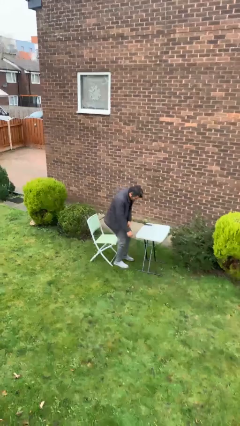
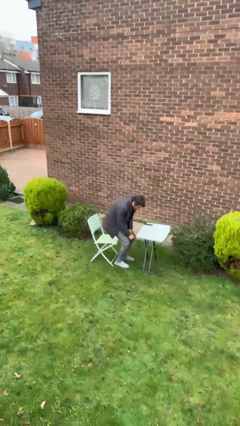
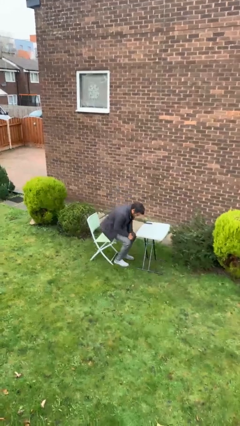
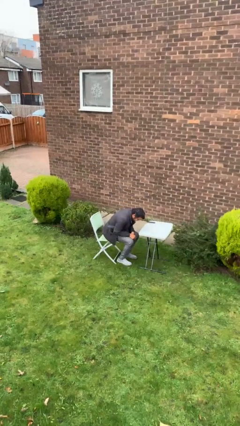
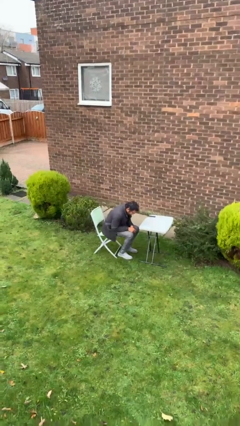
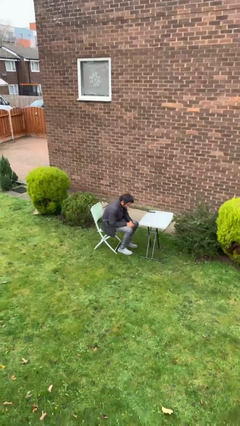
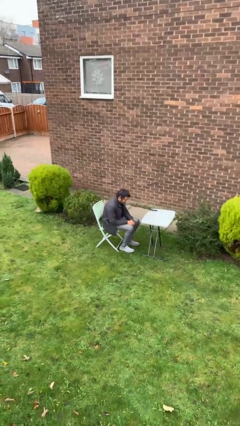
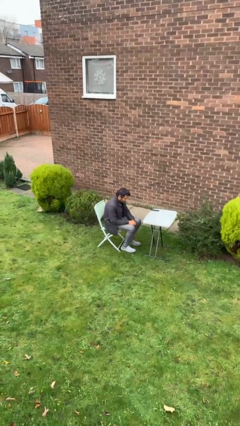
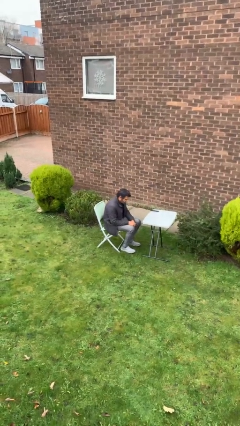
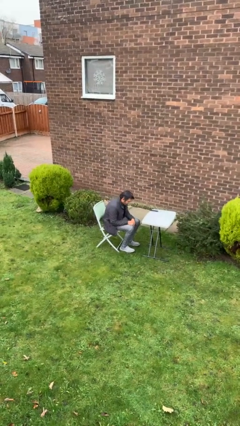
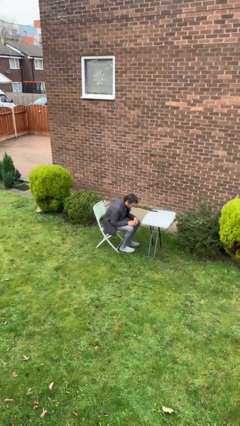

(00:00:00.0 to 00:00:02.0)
person sits down

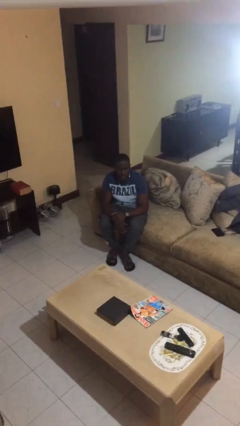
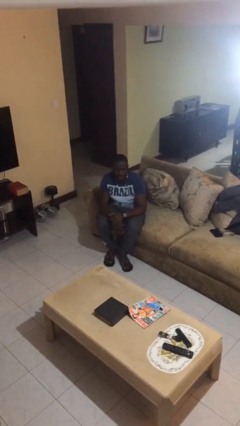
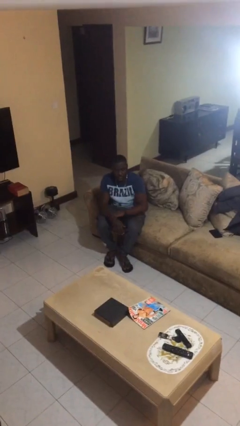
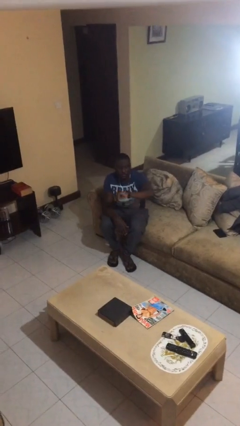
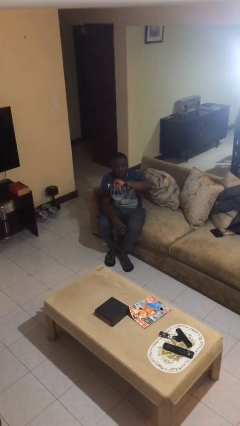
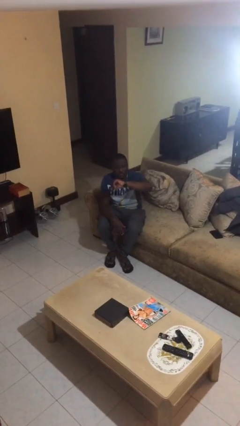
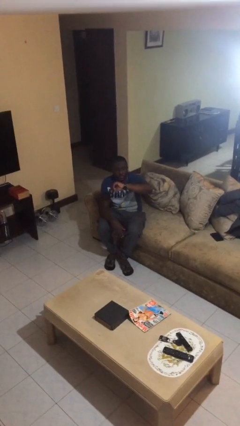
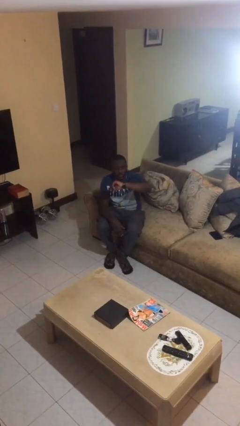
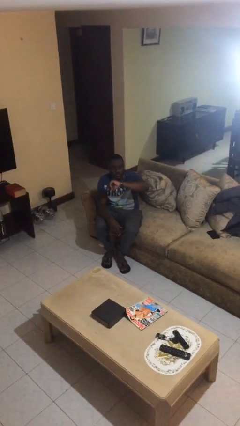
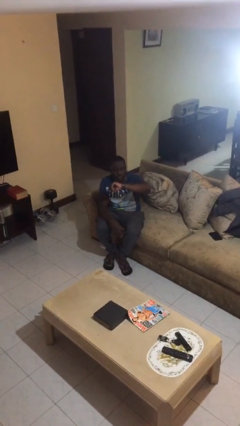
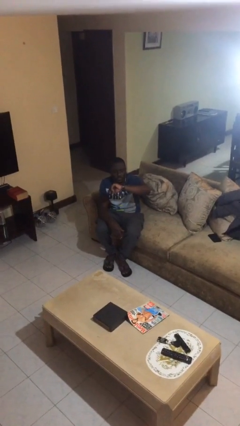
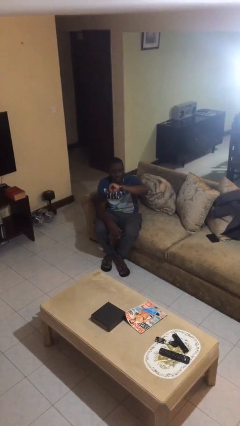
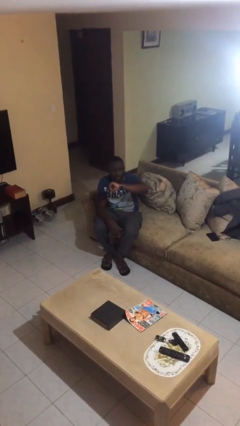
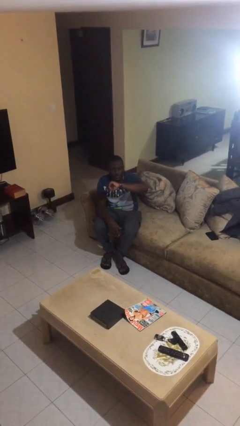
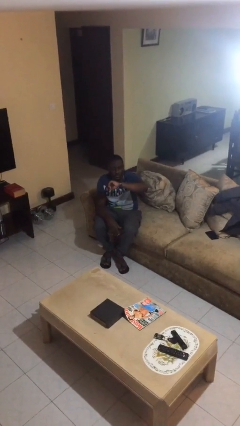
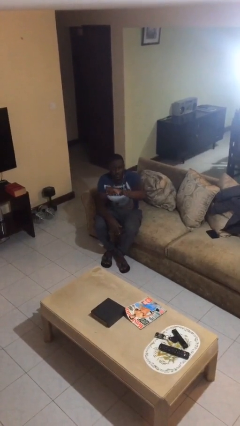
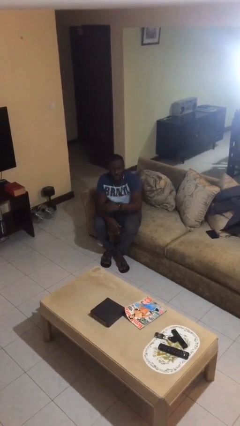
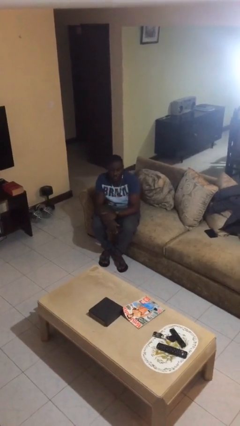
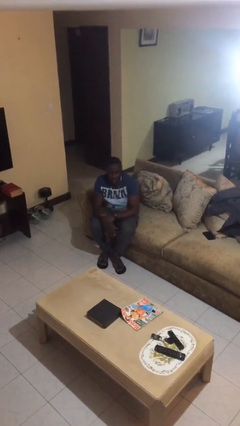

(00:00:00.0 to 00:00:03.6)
person looks at wristwatch

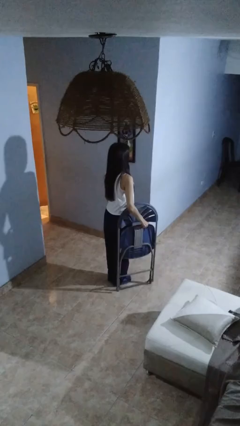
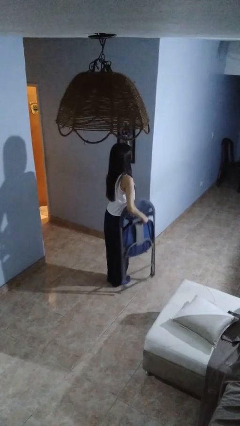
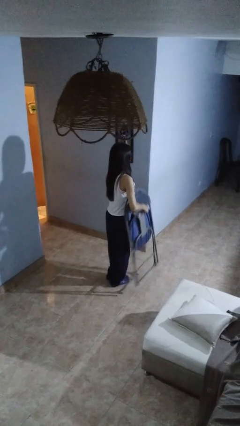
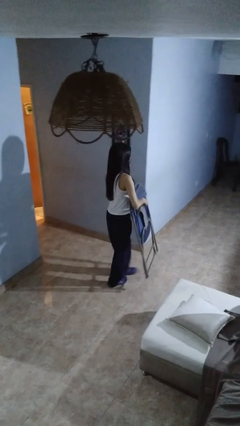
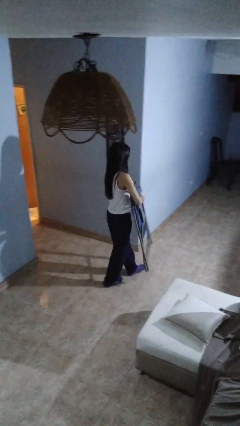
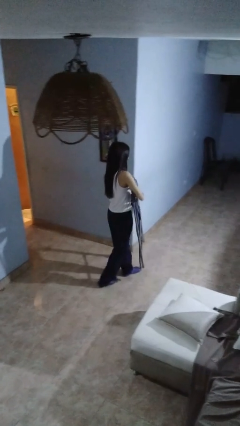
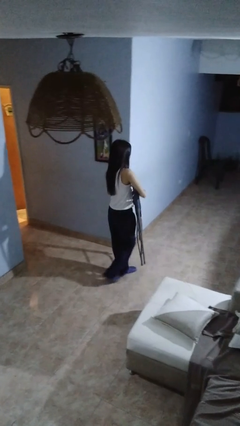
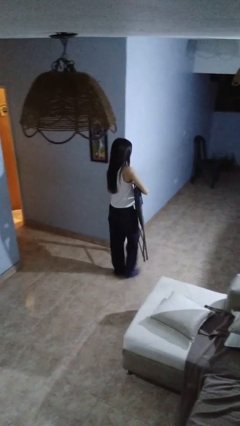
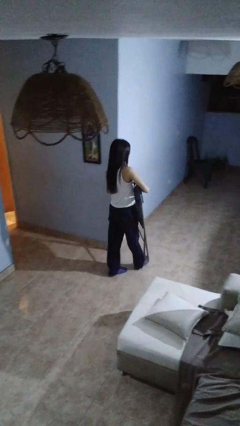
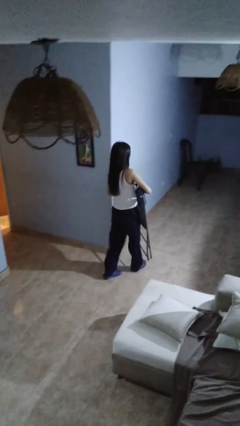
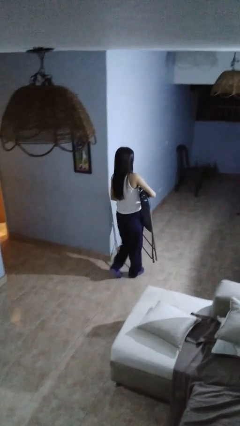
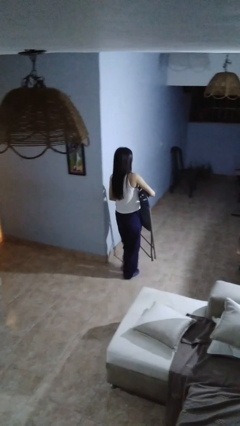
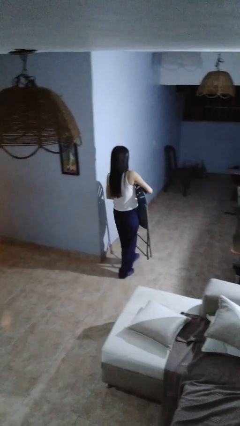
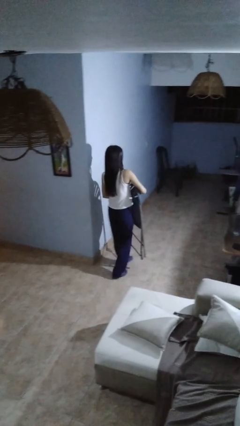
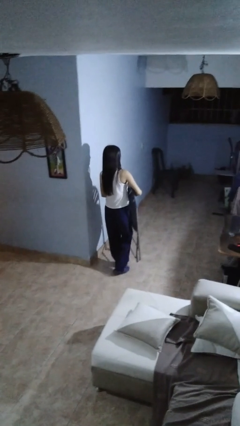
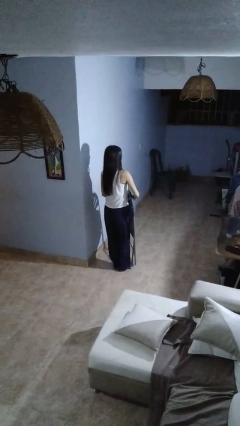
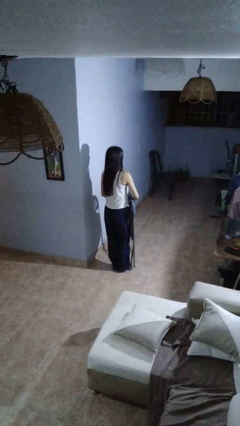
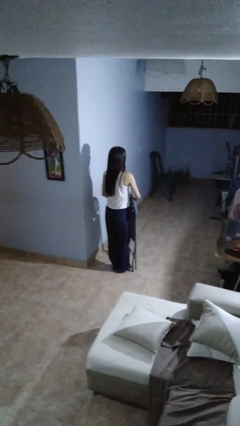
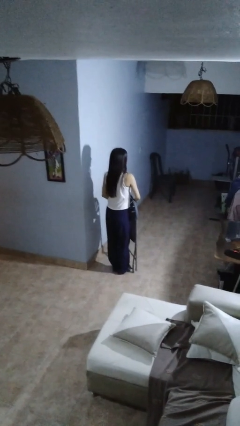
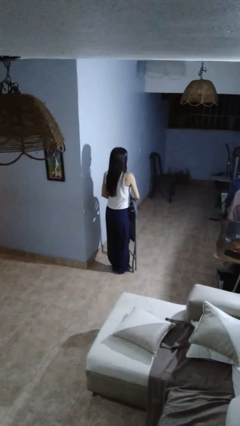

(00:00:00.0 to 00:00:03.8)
person carries furniture

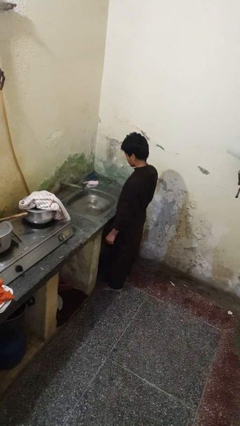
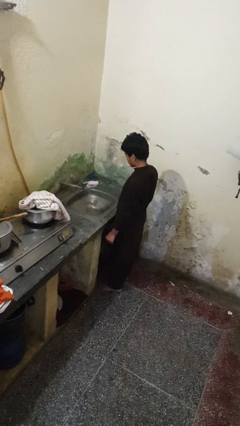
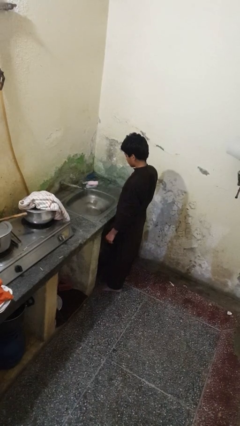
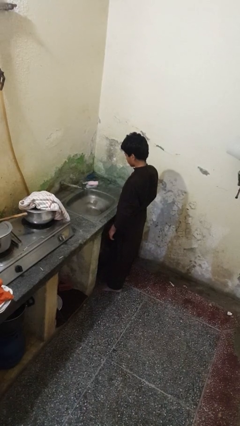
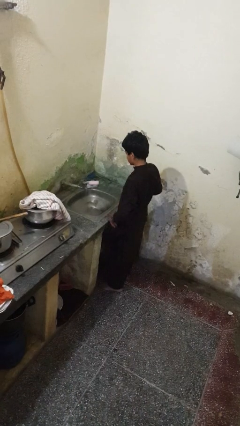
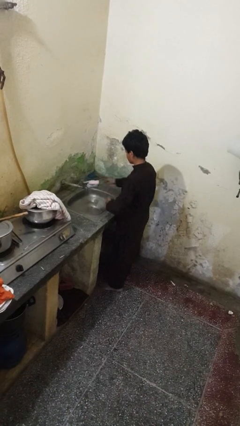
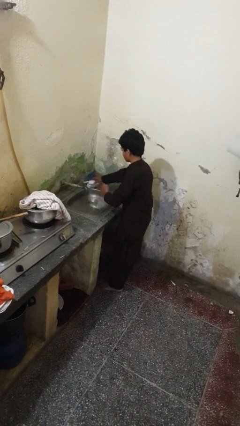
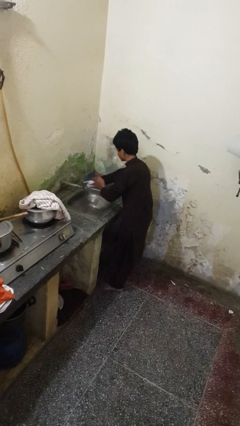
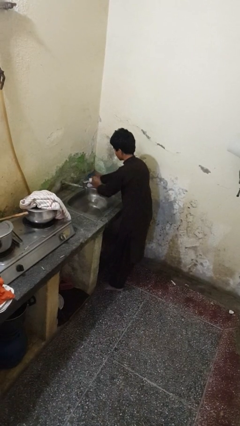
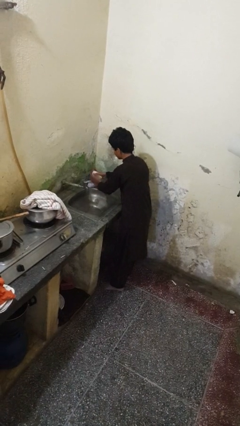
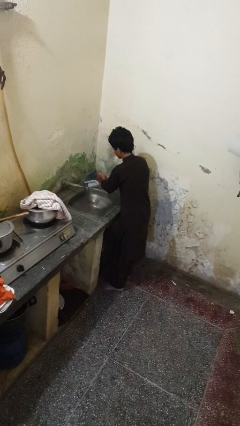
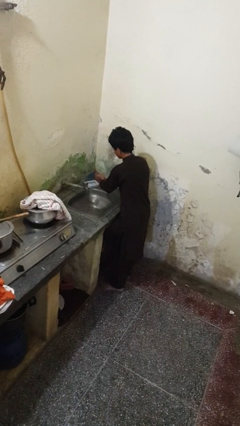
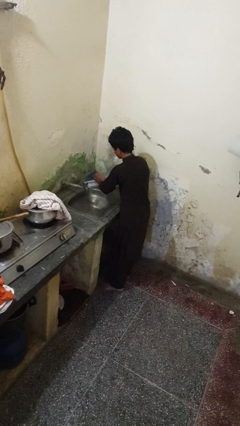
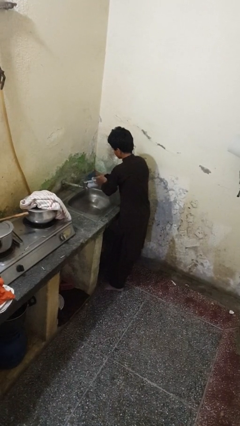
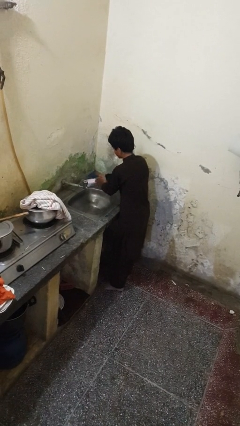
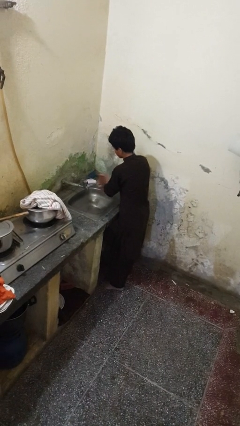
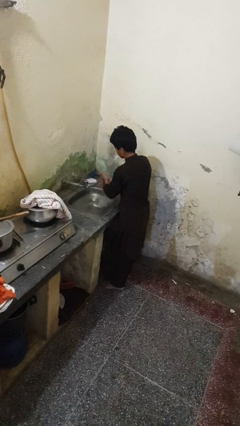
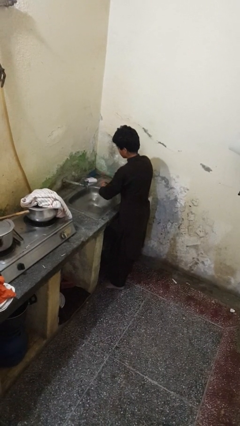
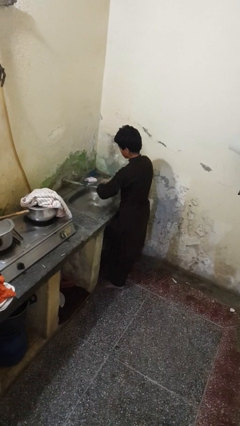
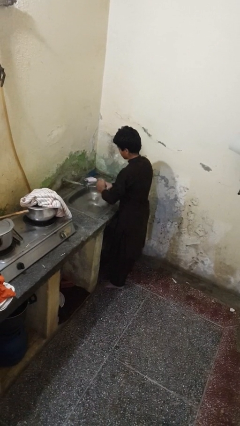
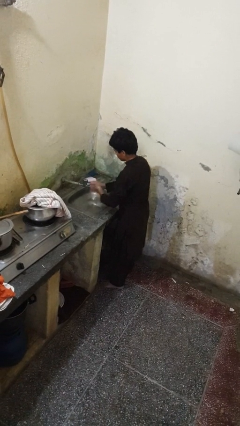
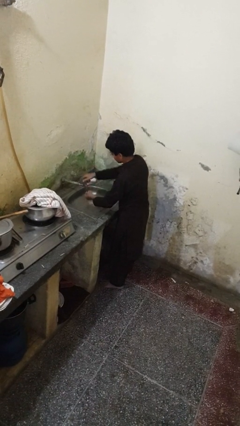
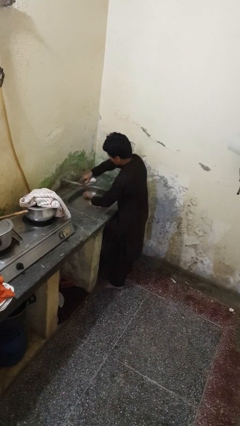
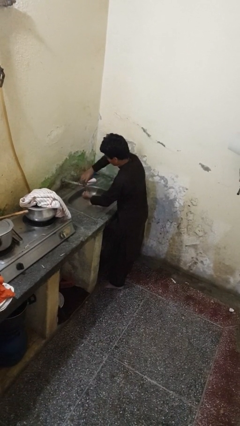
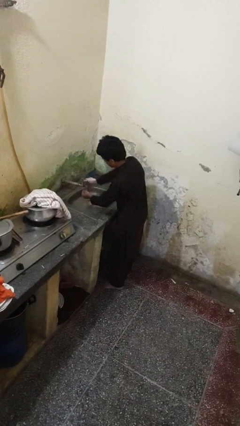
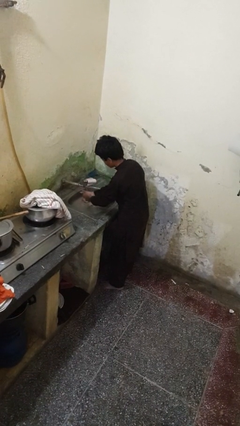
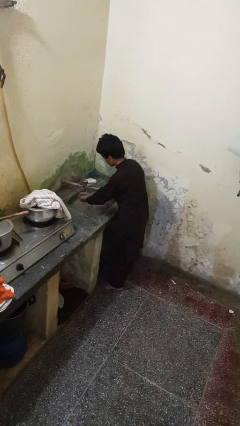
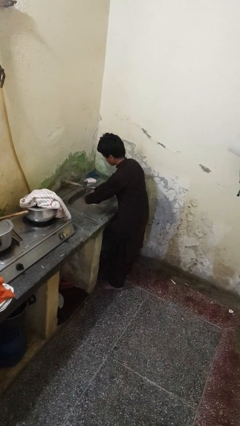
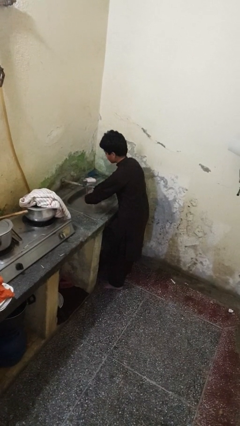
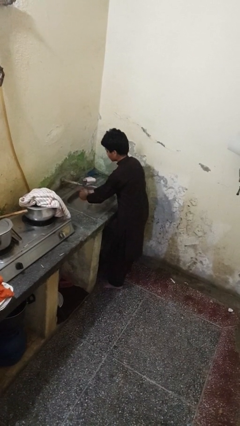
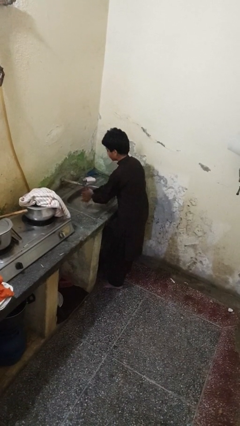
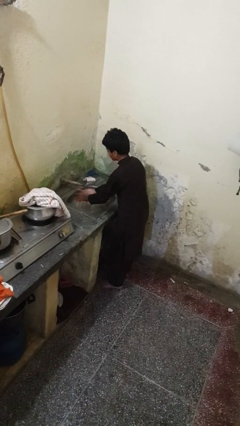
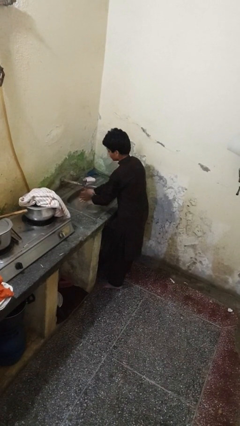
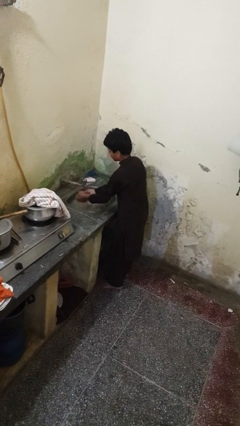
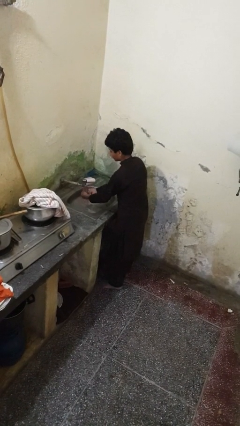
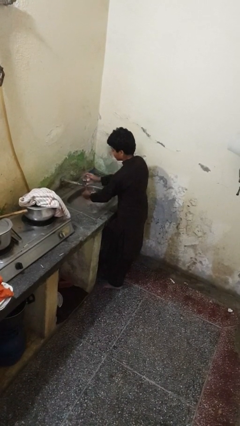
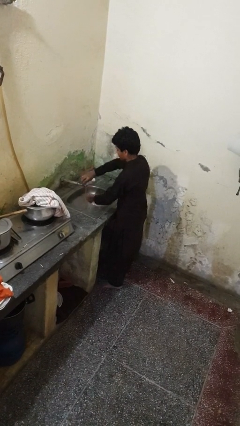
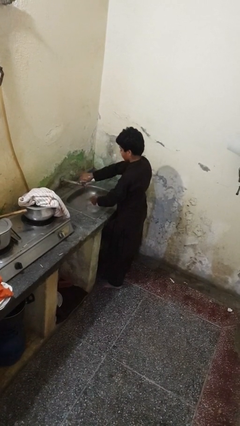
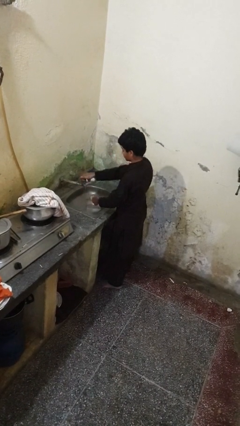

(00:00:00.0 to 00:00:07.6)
person washes hands

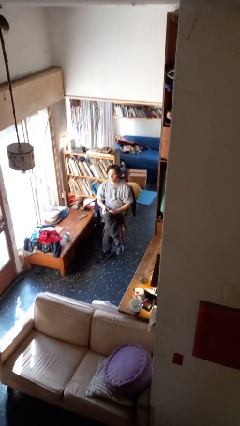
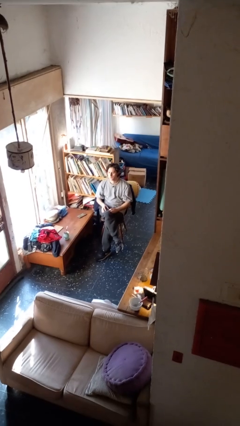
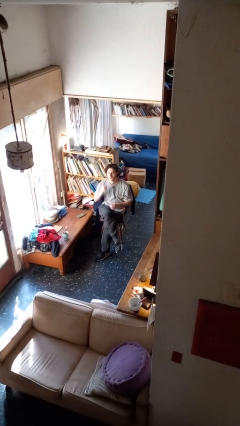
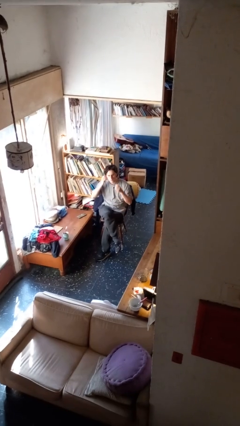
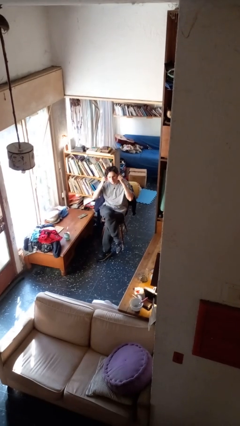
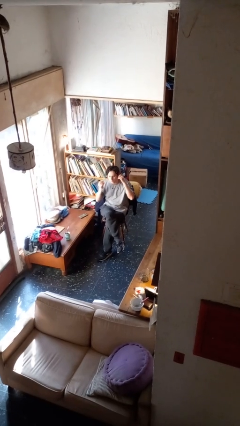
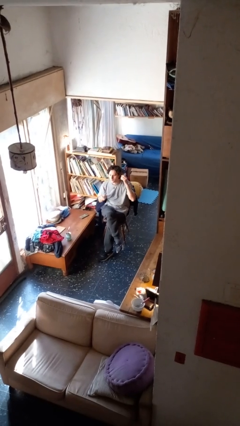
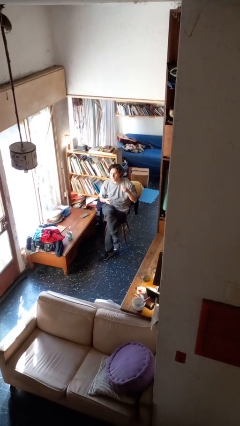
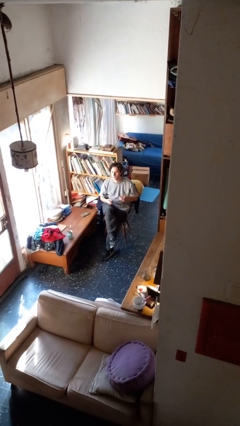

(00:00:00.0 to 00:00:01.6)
person takes off headphones
